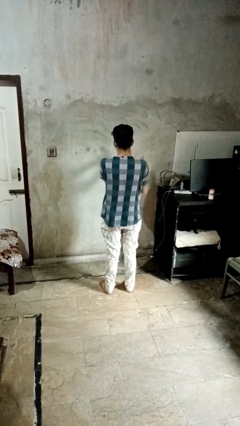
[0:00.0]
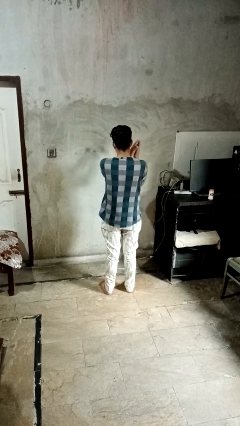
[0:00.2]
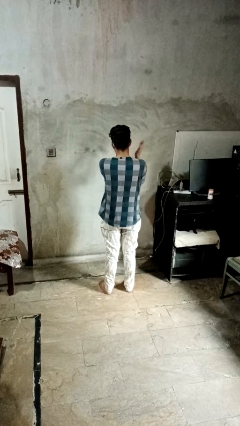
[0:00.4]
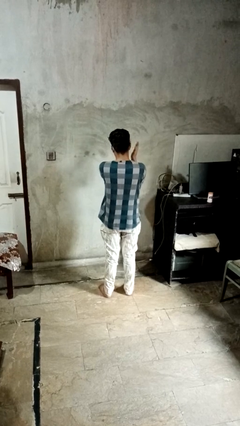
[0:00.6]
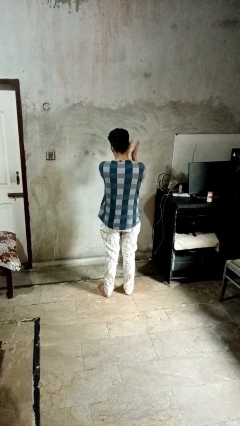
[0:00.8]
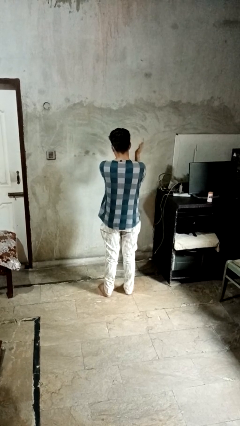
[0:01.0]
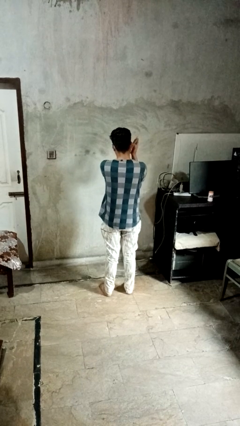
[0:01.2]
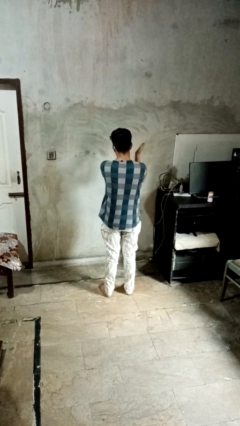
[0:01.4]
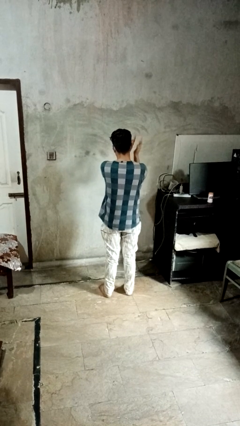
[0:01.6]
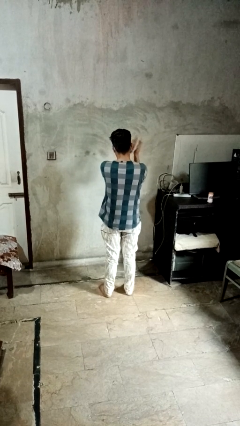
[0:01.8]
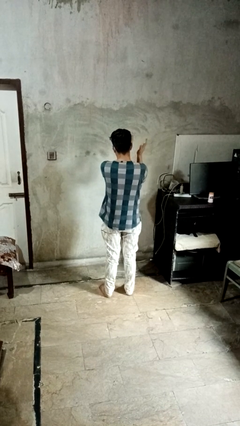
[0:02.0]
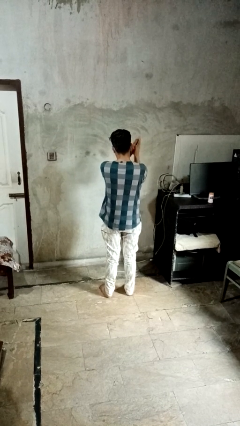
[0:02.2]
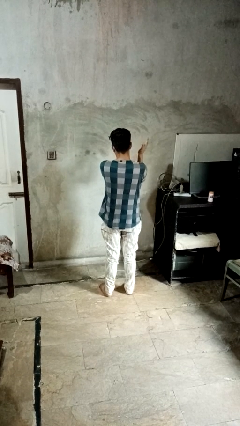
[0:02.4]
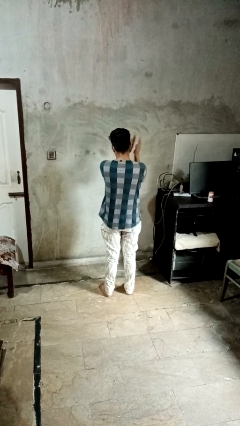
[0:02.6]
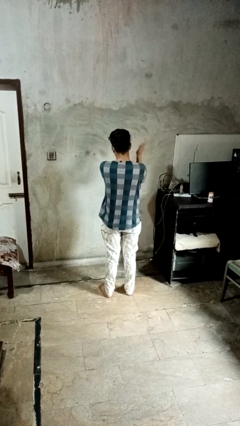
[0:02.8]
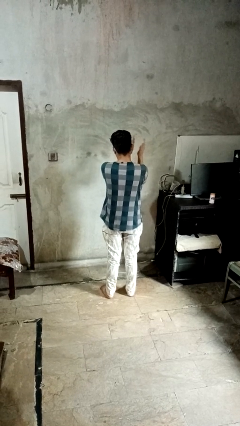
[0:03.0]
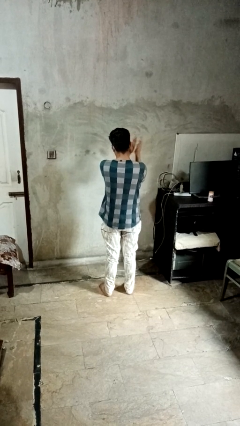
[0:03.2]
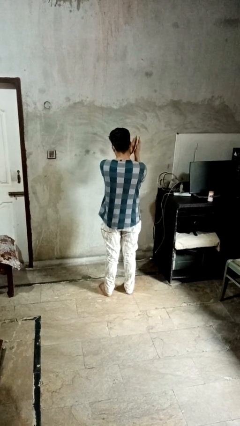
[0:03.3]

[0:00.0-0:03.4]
person claps hands

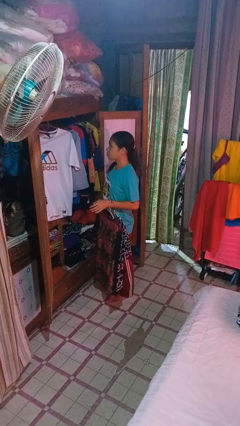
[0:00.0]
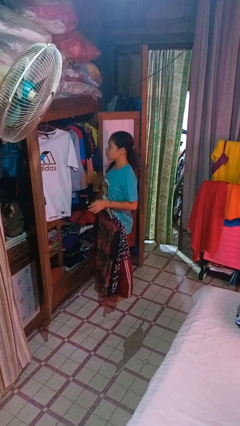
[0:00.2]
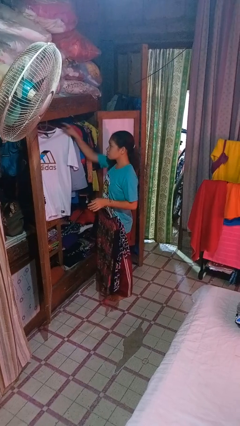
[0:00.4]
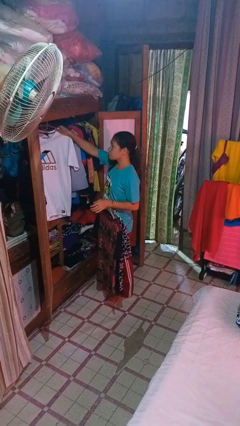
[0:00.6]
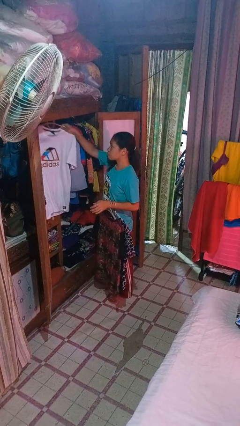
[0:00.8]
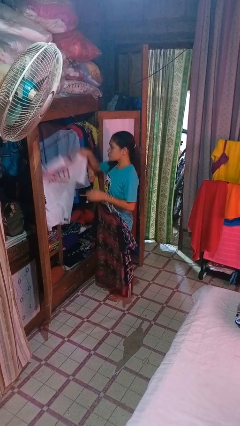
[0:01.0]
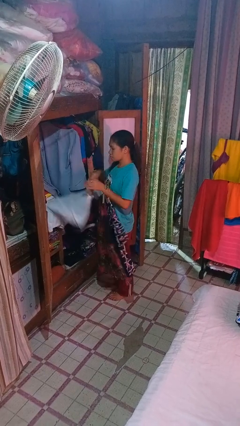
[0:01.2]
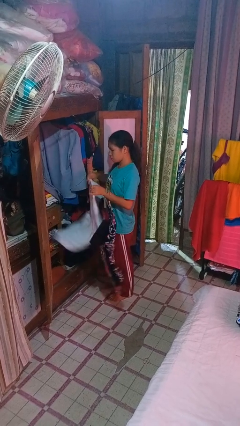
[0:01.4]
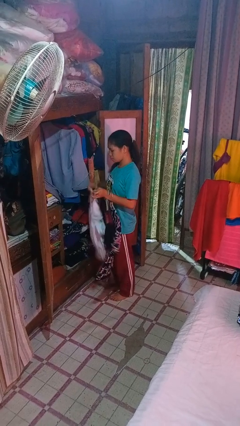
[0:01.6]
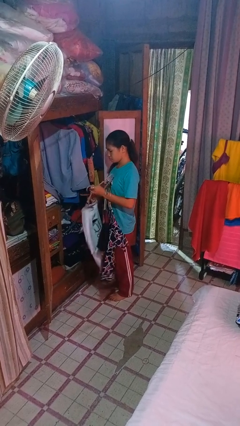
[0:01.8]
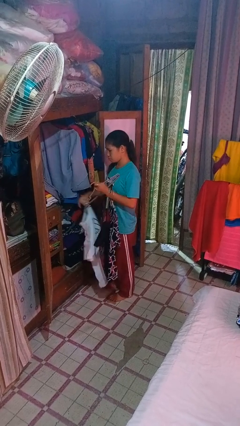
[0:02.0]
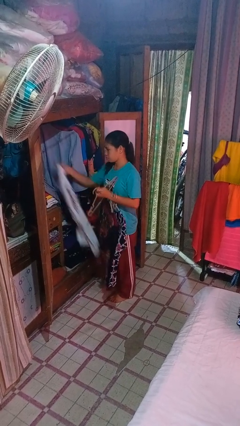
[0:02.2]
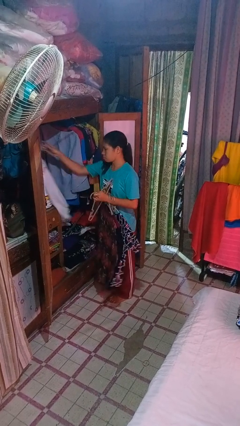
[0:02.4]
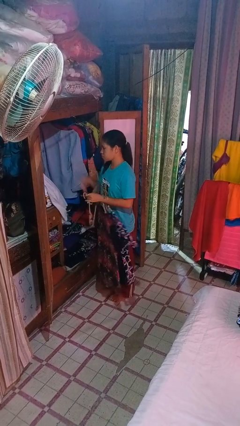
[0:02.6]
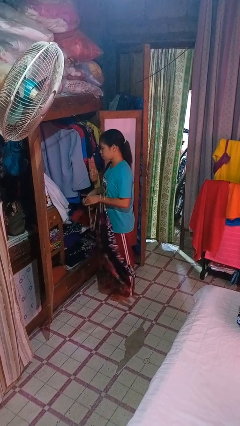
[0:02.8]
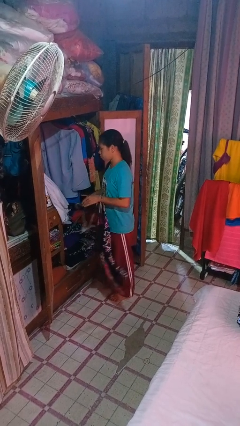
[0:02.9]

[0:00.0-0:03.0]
person takes clothes from closet

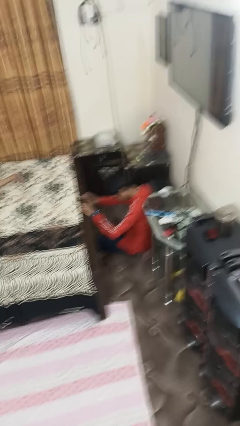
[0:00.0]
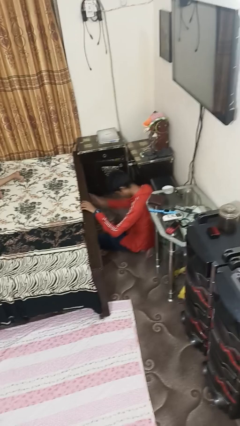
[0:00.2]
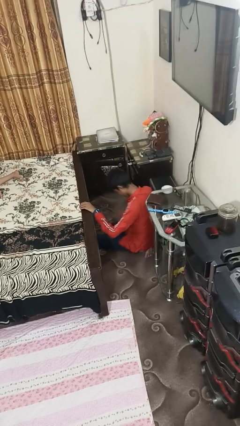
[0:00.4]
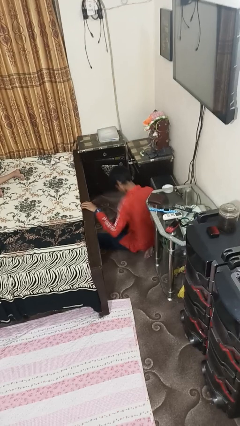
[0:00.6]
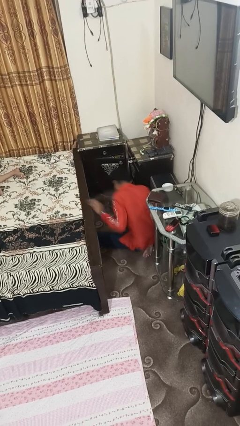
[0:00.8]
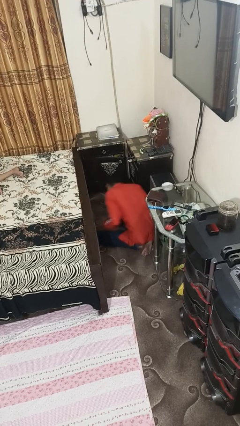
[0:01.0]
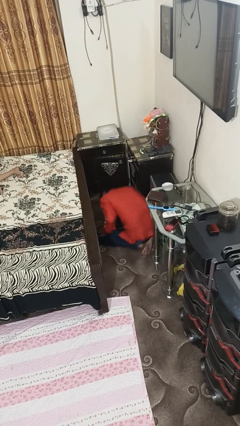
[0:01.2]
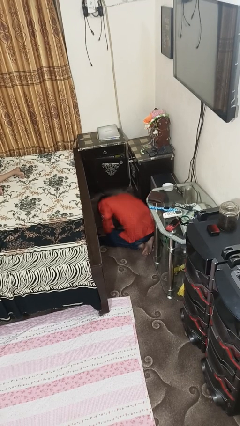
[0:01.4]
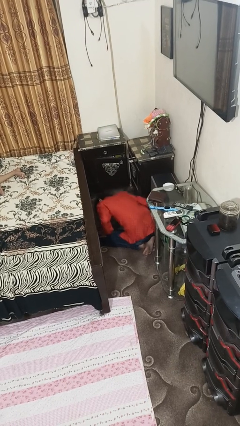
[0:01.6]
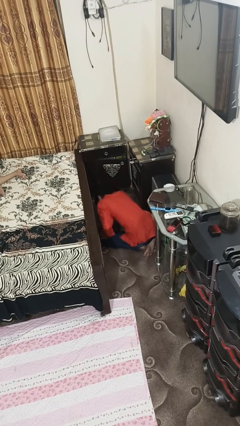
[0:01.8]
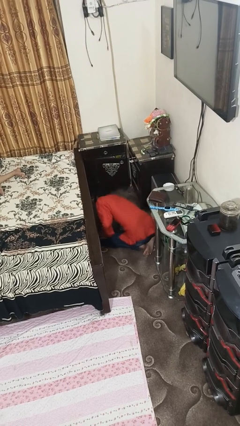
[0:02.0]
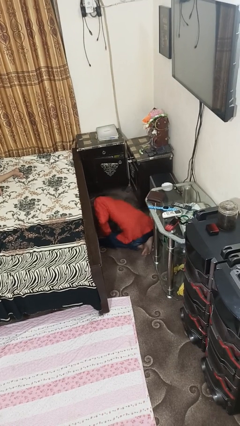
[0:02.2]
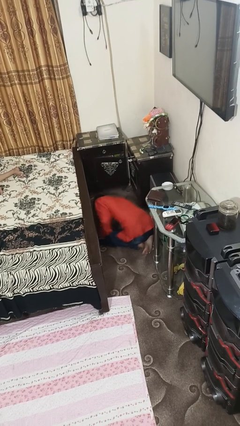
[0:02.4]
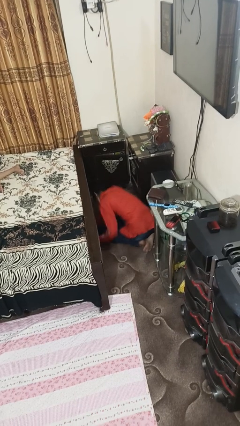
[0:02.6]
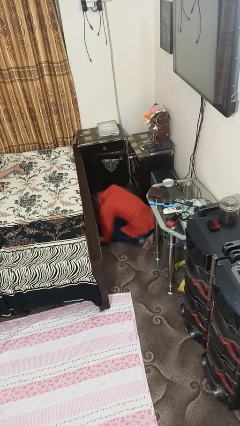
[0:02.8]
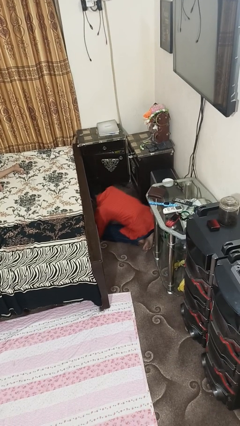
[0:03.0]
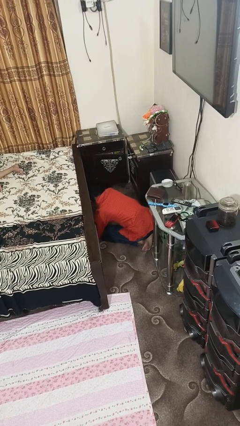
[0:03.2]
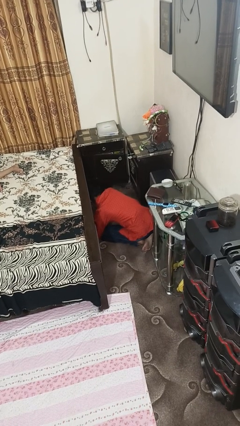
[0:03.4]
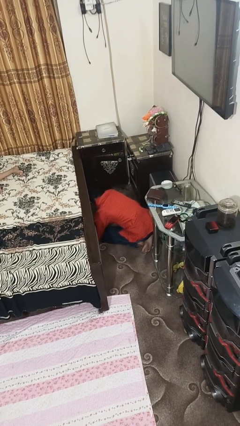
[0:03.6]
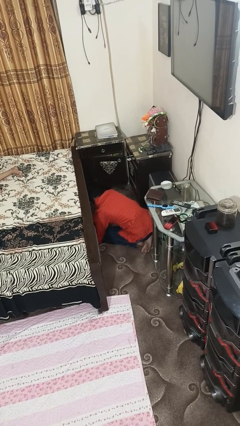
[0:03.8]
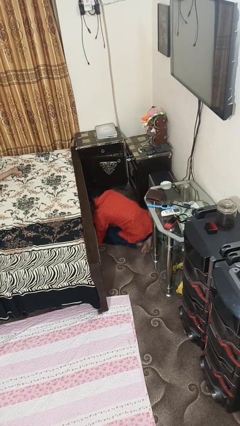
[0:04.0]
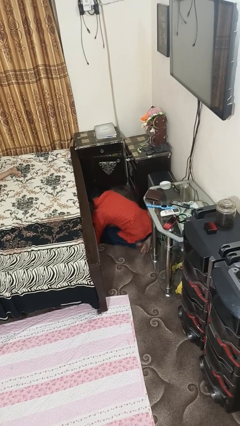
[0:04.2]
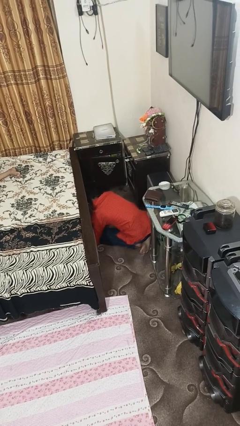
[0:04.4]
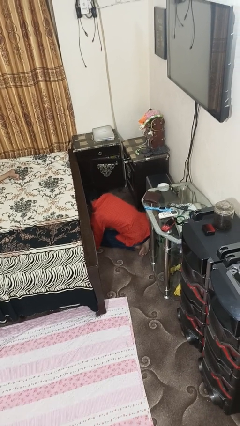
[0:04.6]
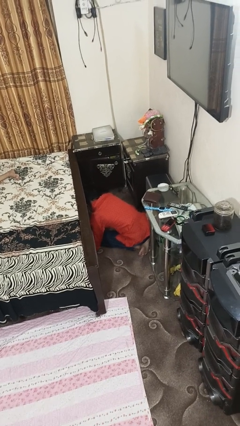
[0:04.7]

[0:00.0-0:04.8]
person searches under bed

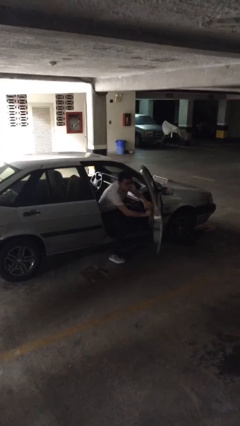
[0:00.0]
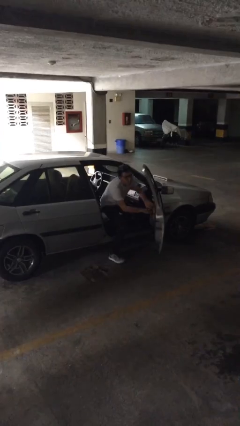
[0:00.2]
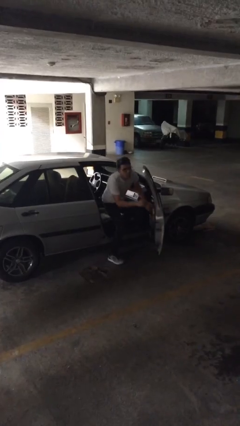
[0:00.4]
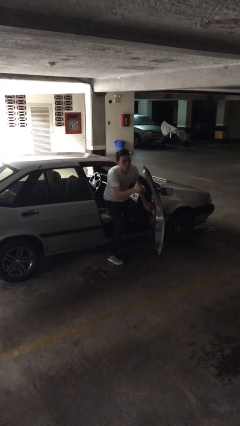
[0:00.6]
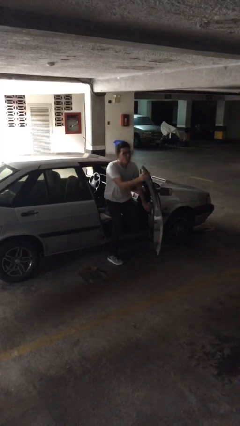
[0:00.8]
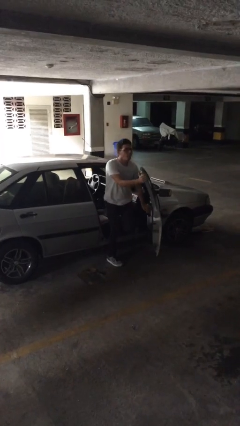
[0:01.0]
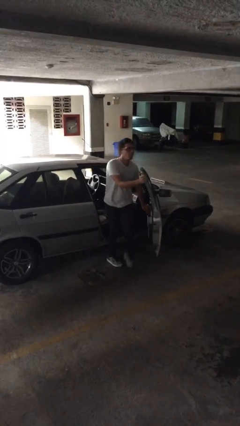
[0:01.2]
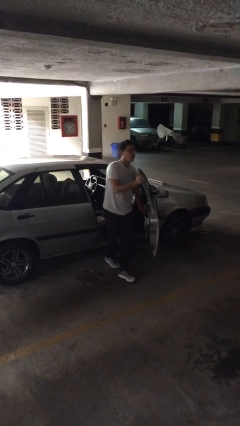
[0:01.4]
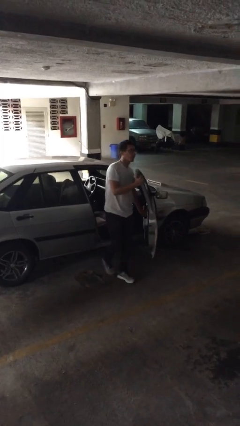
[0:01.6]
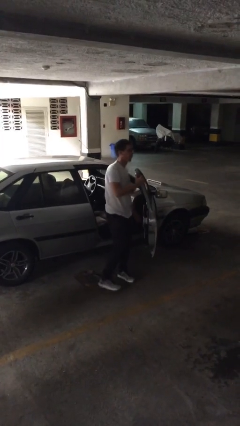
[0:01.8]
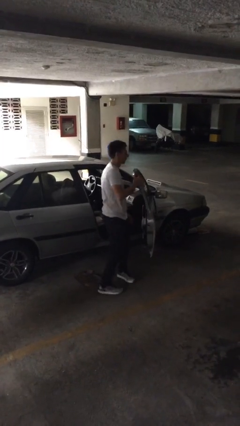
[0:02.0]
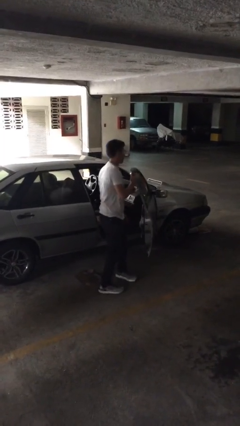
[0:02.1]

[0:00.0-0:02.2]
person exits car

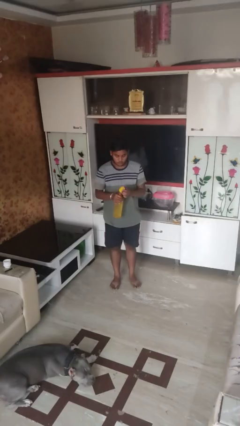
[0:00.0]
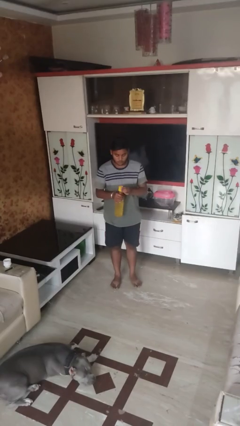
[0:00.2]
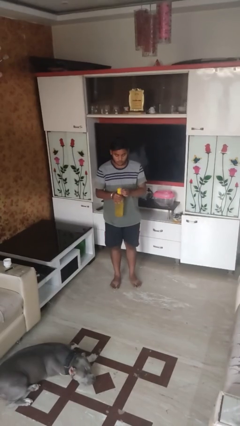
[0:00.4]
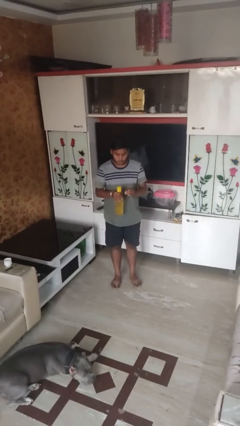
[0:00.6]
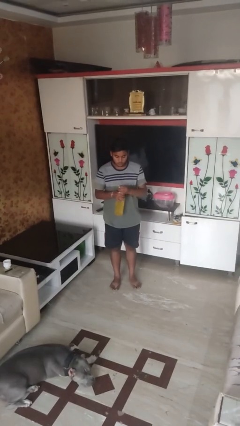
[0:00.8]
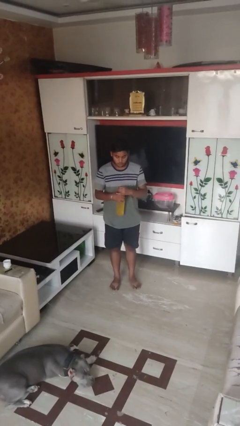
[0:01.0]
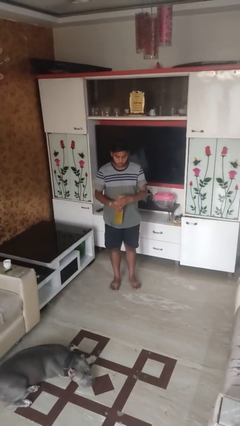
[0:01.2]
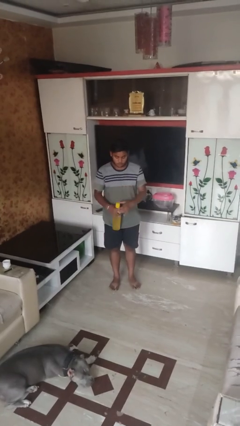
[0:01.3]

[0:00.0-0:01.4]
person screws lid to bottle

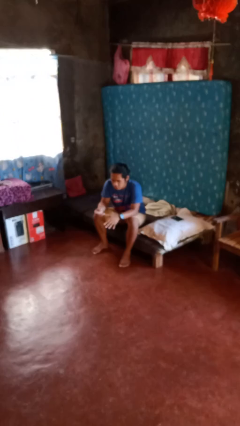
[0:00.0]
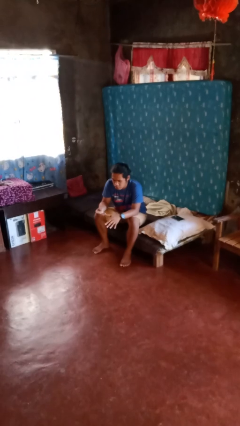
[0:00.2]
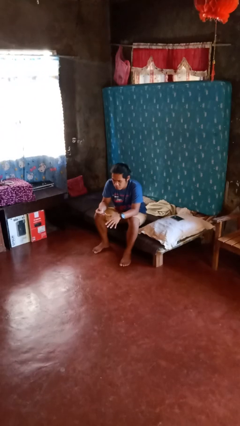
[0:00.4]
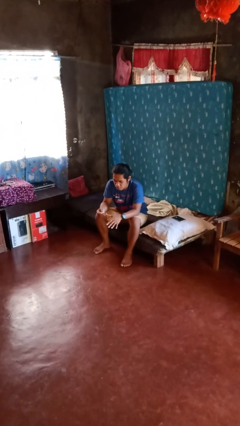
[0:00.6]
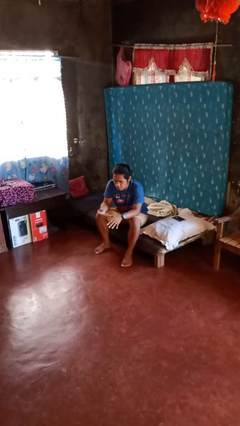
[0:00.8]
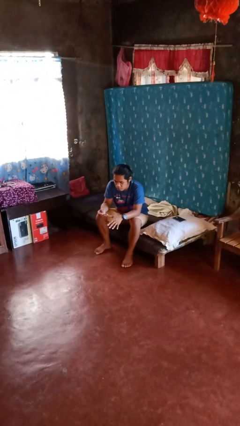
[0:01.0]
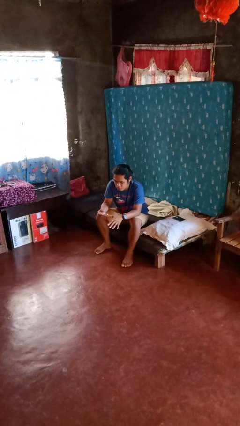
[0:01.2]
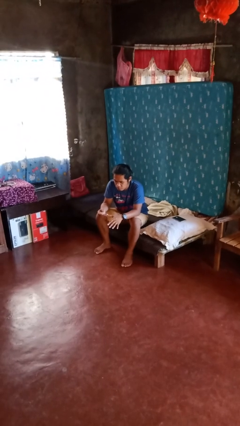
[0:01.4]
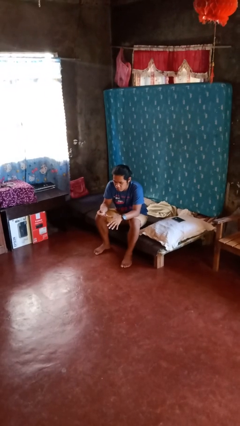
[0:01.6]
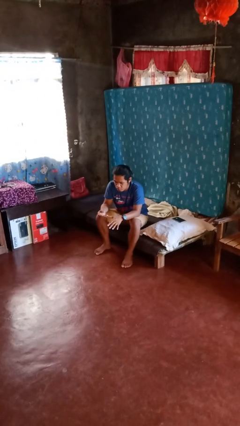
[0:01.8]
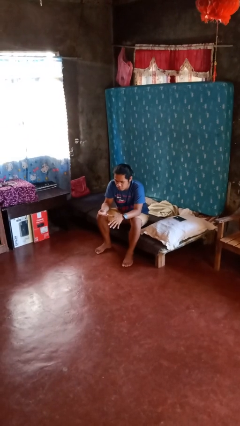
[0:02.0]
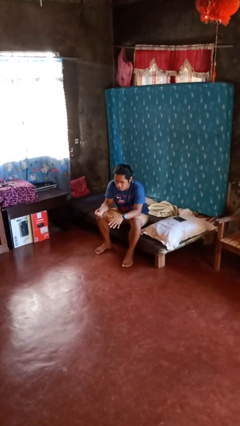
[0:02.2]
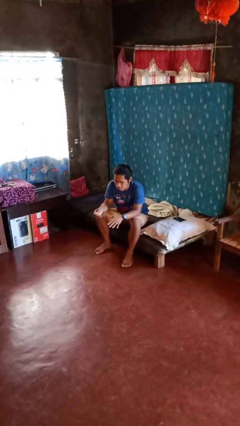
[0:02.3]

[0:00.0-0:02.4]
person clips fingernails

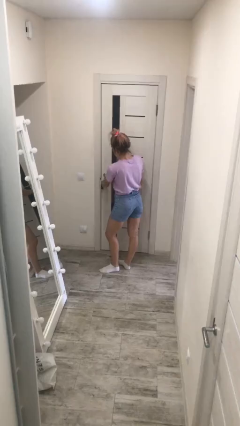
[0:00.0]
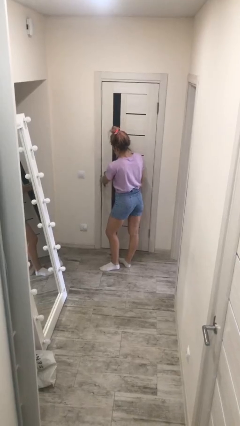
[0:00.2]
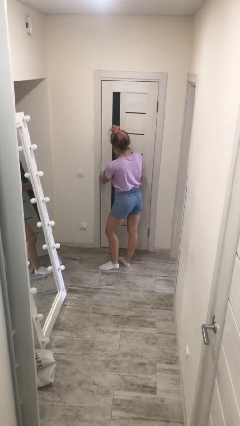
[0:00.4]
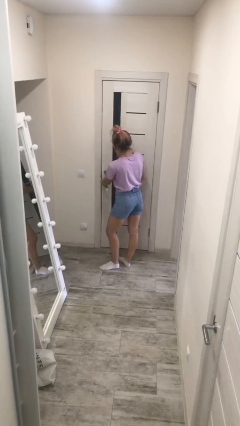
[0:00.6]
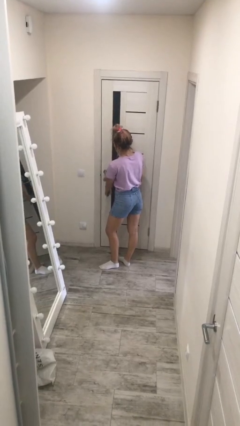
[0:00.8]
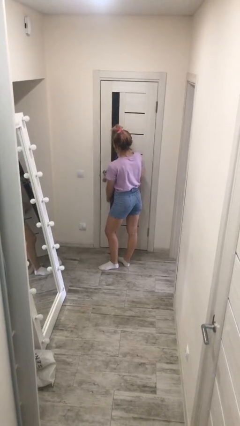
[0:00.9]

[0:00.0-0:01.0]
person unlocks door with keys
